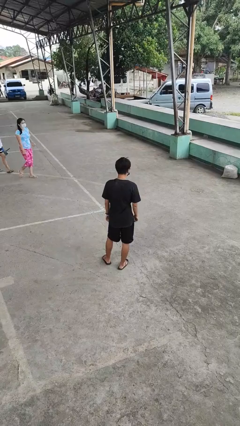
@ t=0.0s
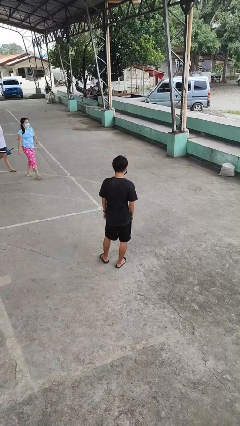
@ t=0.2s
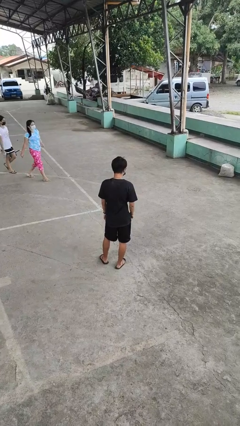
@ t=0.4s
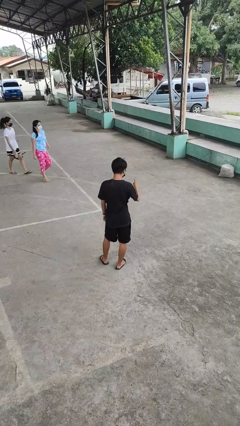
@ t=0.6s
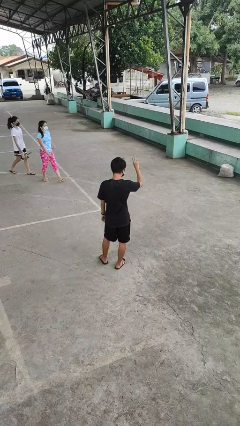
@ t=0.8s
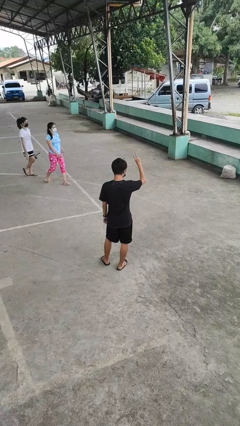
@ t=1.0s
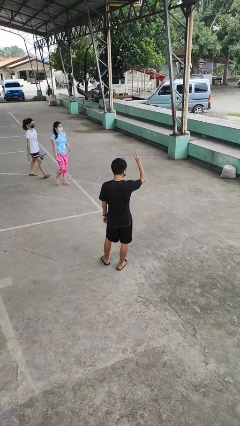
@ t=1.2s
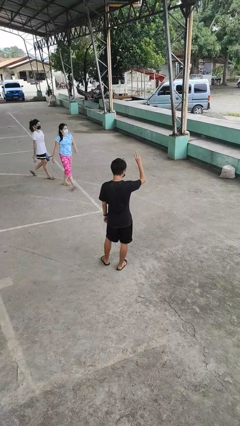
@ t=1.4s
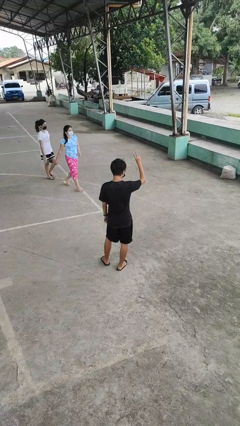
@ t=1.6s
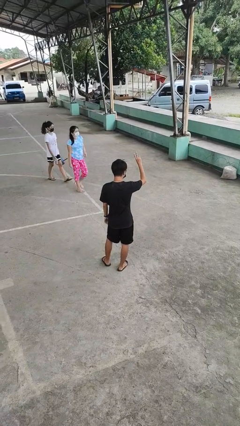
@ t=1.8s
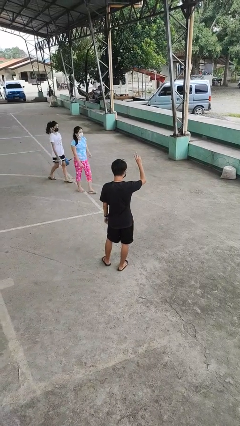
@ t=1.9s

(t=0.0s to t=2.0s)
person gestures peace

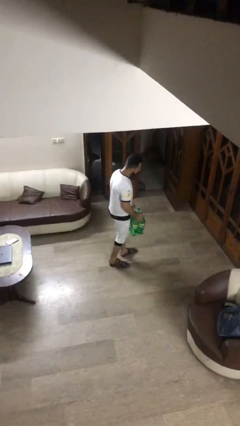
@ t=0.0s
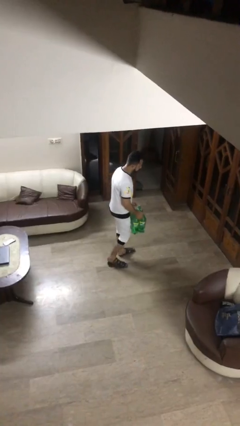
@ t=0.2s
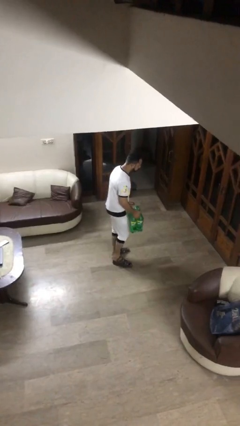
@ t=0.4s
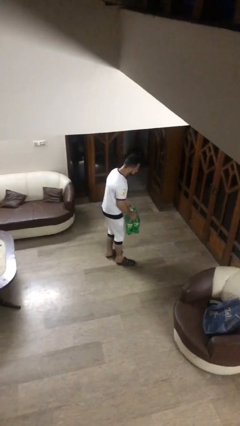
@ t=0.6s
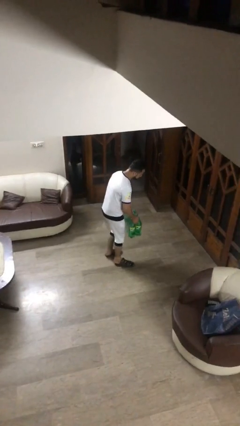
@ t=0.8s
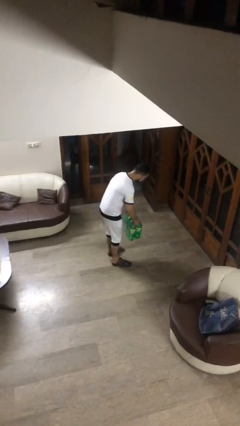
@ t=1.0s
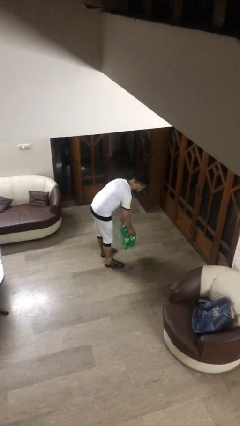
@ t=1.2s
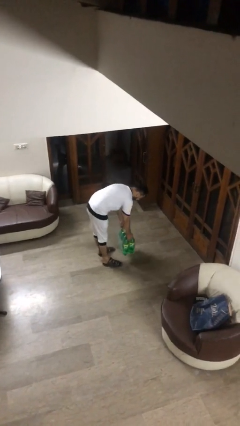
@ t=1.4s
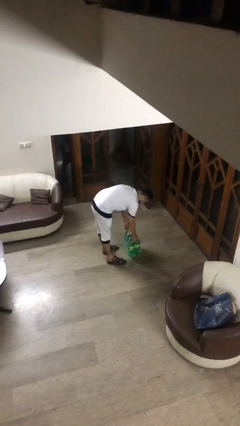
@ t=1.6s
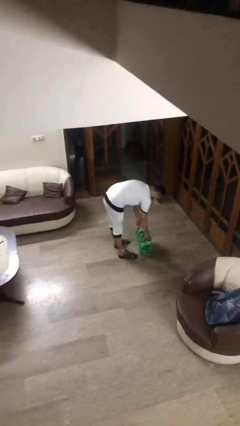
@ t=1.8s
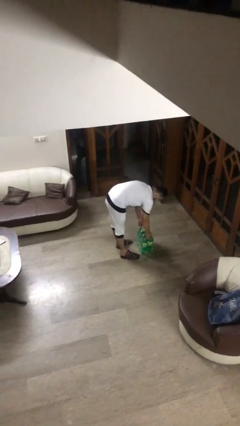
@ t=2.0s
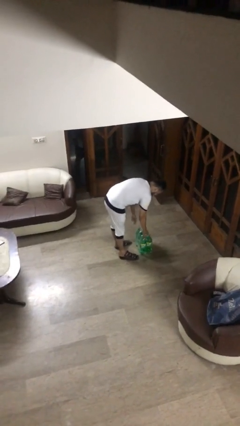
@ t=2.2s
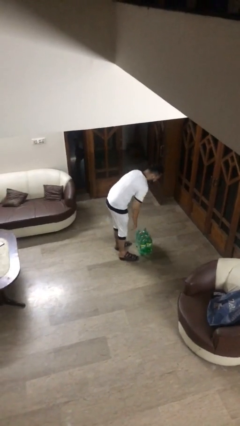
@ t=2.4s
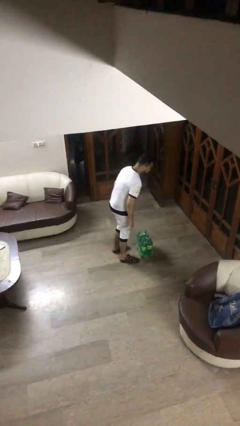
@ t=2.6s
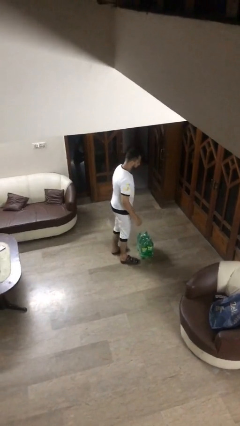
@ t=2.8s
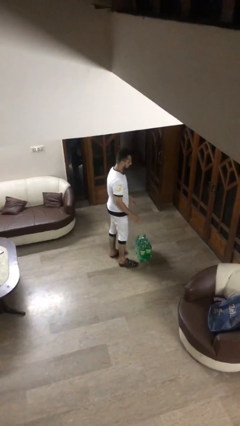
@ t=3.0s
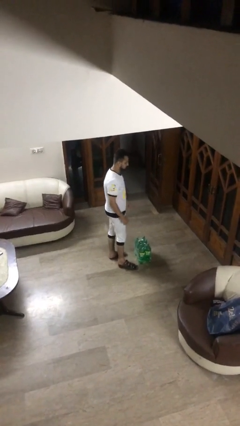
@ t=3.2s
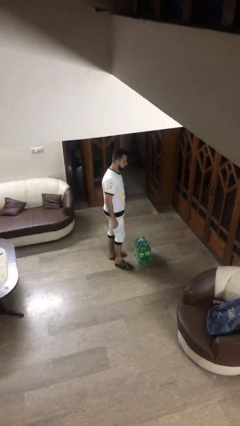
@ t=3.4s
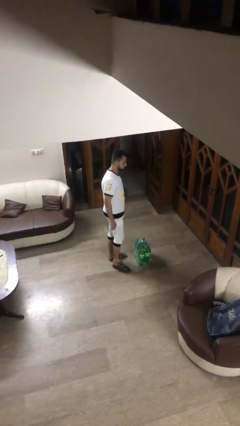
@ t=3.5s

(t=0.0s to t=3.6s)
person puts down object on floor

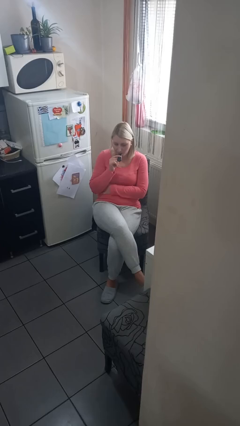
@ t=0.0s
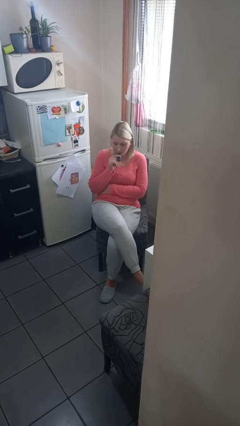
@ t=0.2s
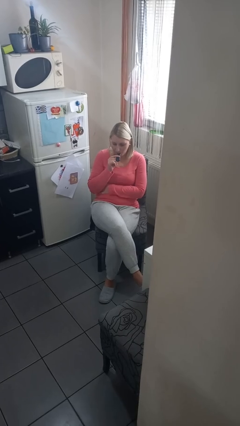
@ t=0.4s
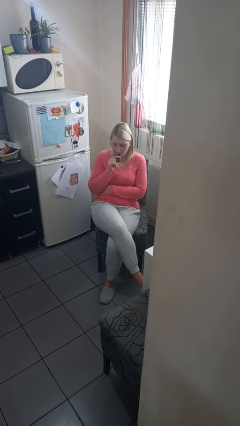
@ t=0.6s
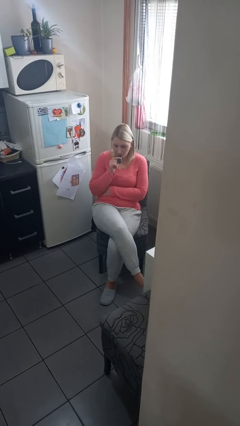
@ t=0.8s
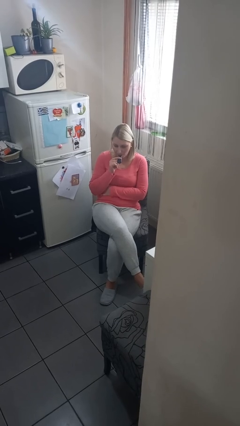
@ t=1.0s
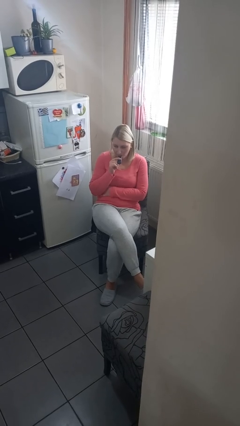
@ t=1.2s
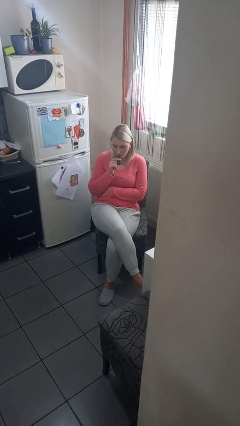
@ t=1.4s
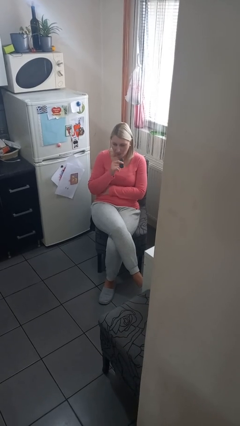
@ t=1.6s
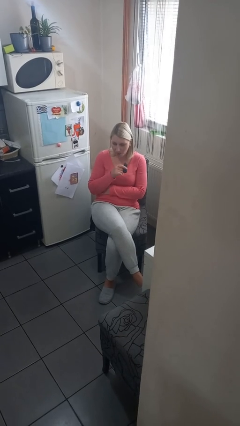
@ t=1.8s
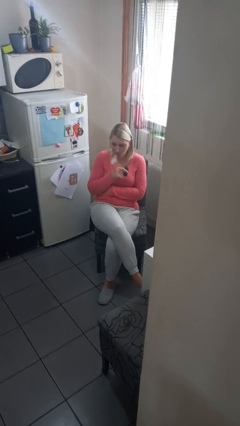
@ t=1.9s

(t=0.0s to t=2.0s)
person vapes

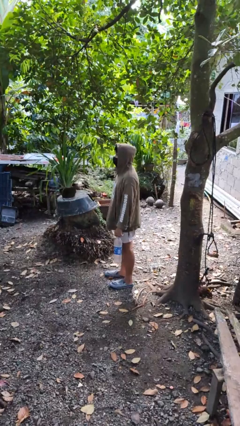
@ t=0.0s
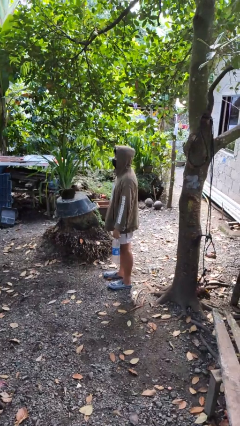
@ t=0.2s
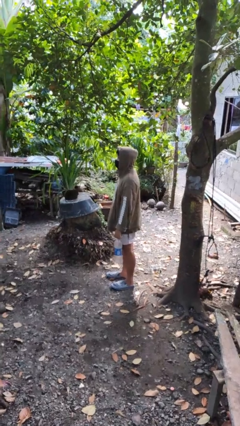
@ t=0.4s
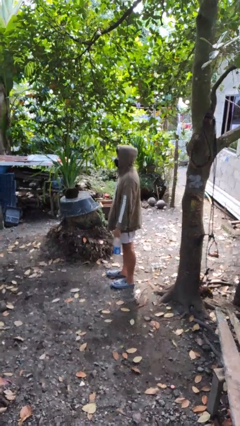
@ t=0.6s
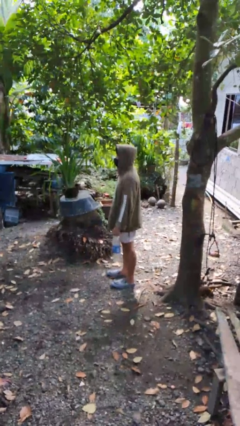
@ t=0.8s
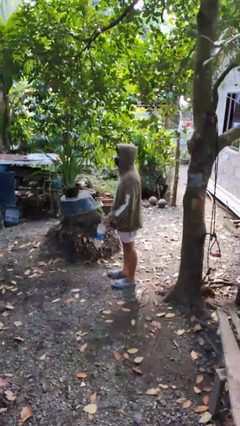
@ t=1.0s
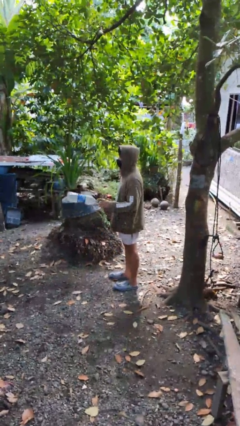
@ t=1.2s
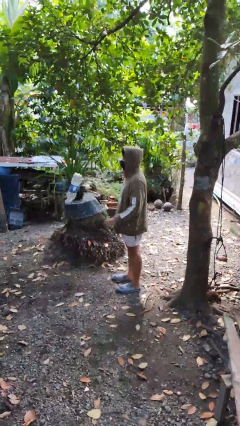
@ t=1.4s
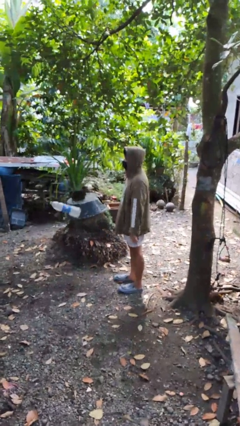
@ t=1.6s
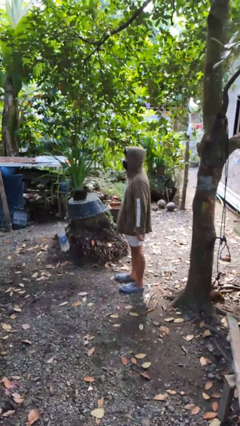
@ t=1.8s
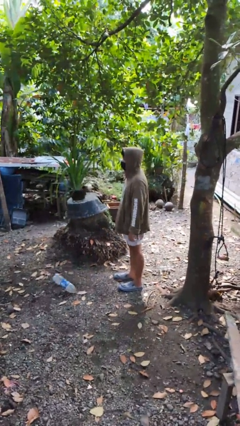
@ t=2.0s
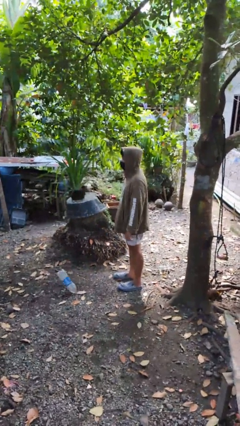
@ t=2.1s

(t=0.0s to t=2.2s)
person throws object into air

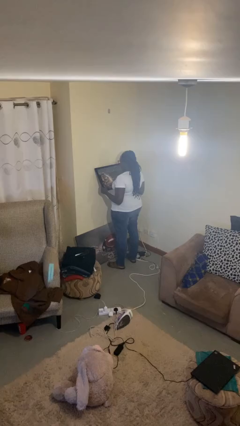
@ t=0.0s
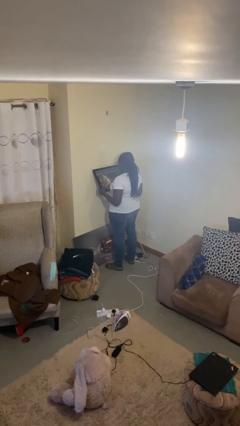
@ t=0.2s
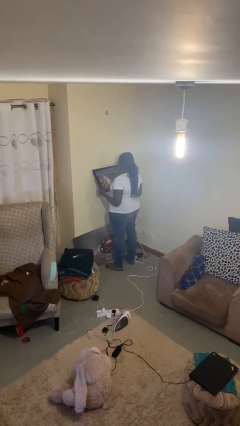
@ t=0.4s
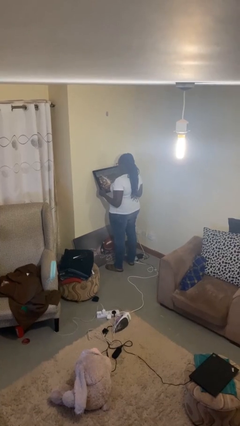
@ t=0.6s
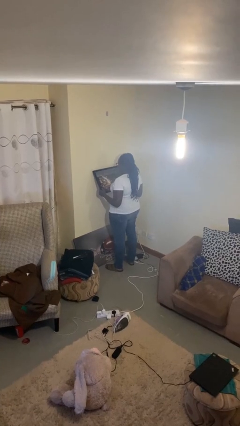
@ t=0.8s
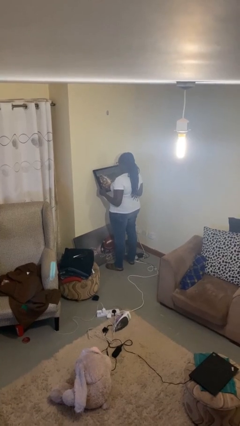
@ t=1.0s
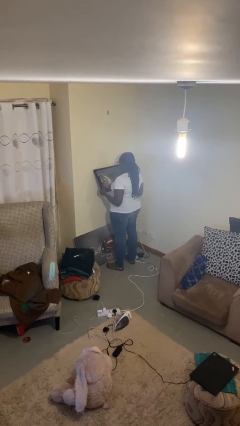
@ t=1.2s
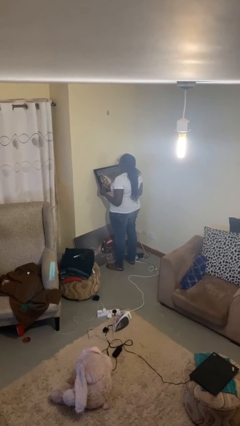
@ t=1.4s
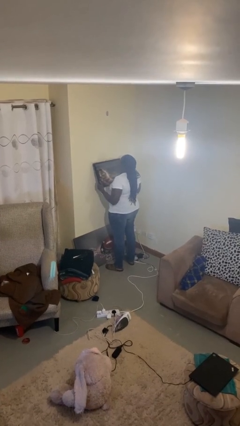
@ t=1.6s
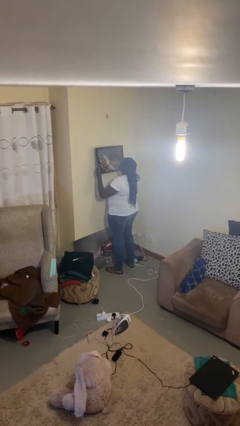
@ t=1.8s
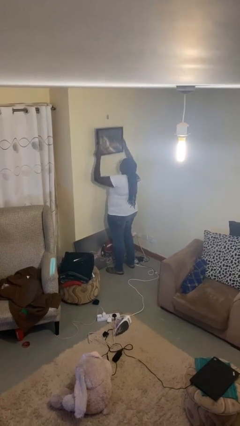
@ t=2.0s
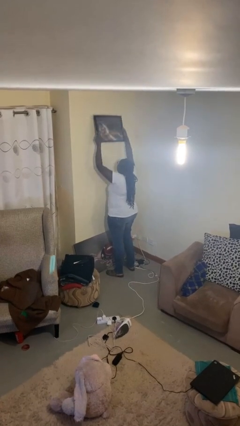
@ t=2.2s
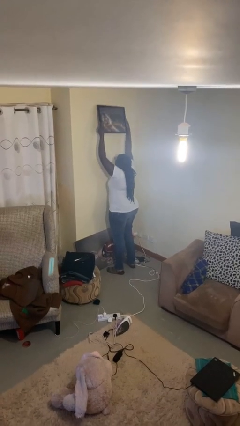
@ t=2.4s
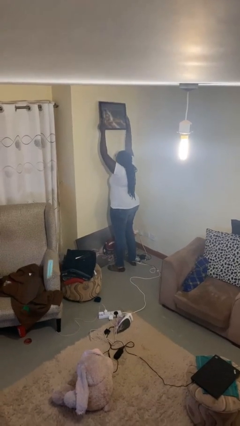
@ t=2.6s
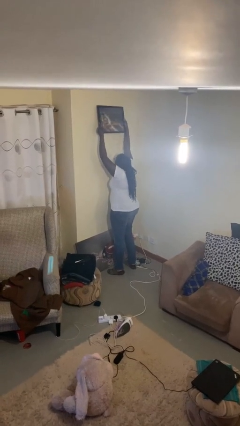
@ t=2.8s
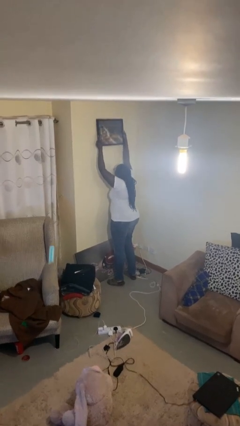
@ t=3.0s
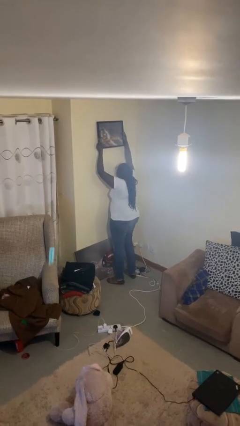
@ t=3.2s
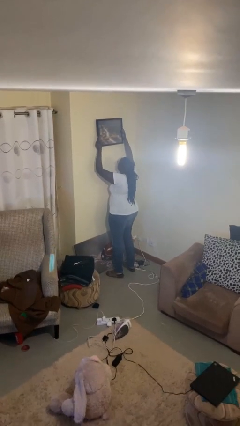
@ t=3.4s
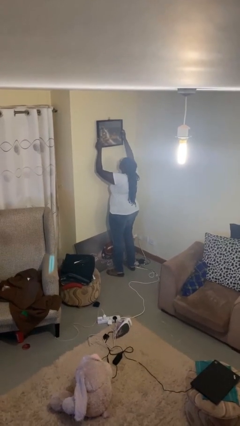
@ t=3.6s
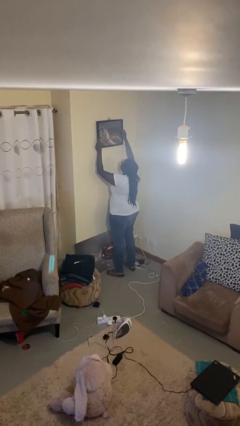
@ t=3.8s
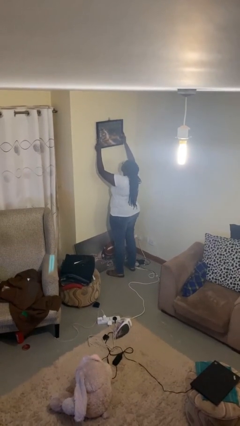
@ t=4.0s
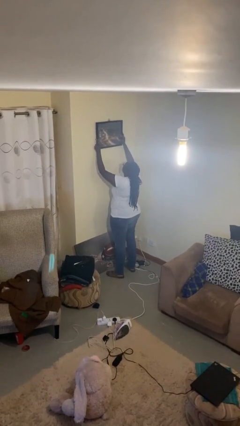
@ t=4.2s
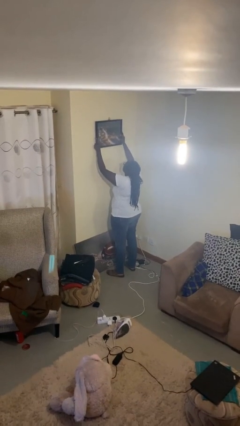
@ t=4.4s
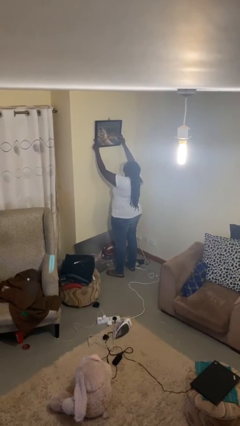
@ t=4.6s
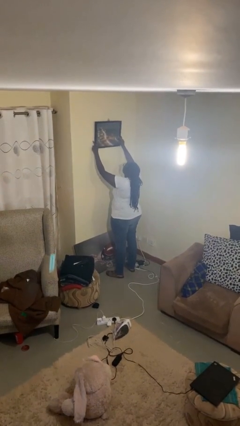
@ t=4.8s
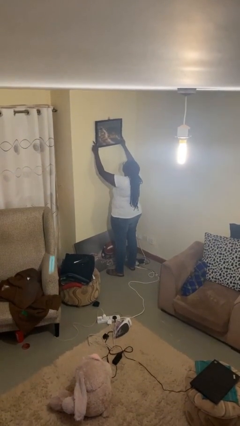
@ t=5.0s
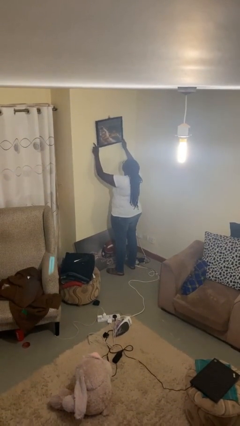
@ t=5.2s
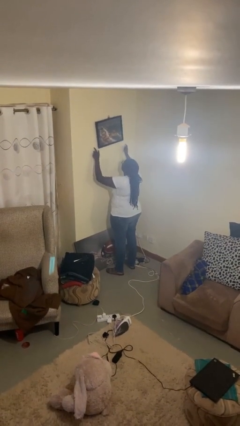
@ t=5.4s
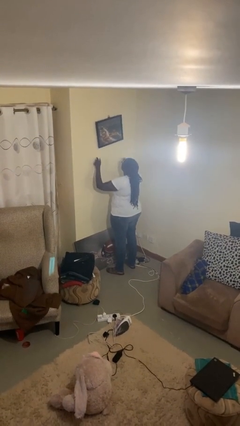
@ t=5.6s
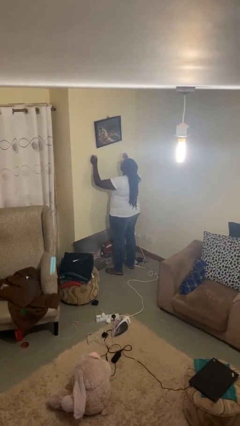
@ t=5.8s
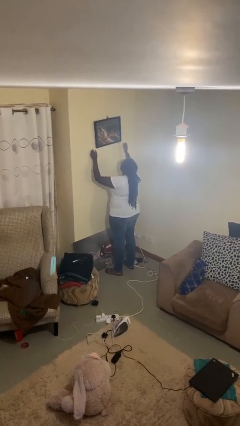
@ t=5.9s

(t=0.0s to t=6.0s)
person puts up picture frame

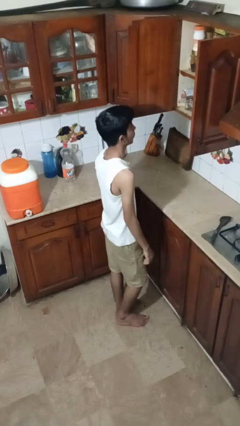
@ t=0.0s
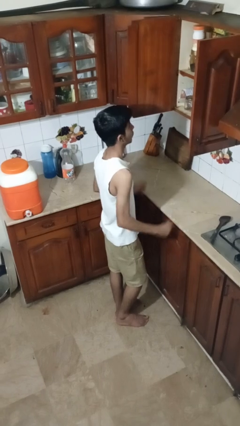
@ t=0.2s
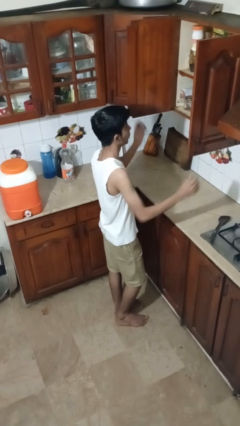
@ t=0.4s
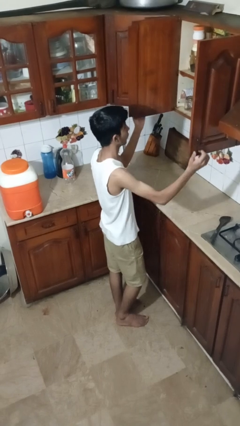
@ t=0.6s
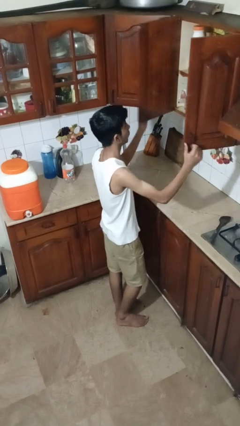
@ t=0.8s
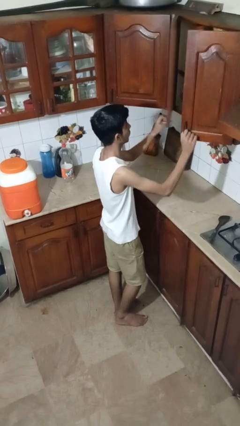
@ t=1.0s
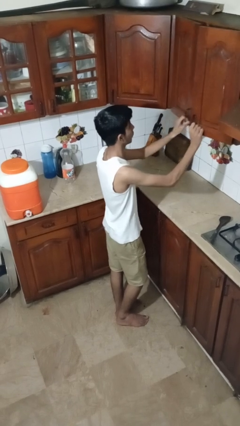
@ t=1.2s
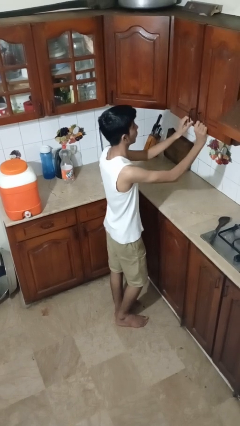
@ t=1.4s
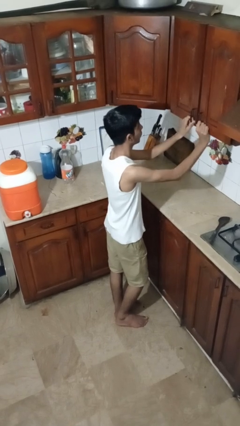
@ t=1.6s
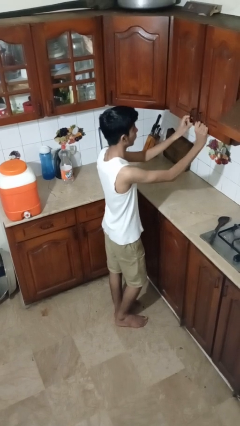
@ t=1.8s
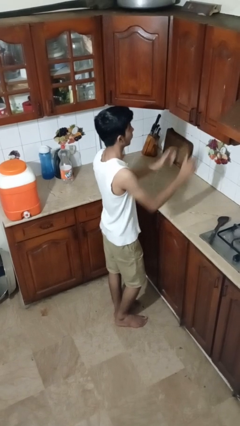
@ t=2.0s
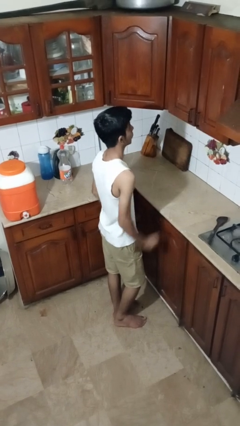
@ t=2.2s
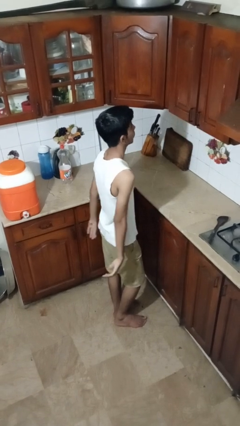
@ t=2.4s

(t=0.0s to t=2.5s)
person closes cabinet
